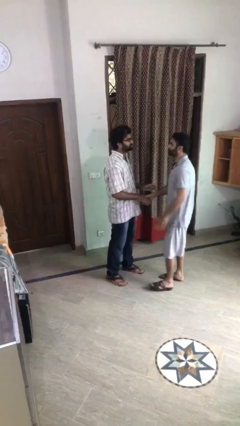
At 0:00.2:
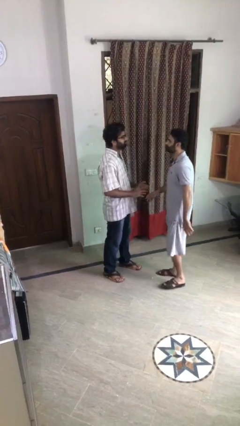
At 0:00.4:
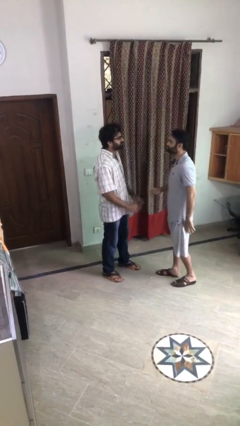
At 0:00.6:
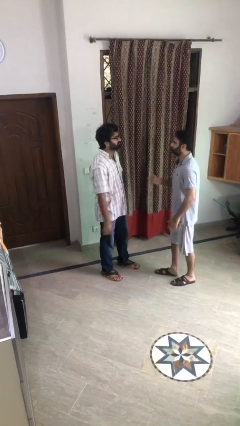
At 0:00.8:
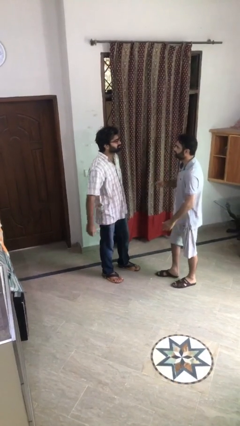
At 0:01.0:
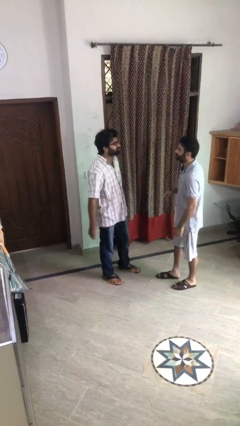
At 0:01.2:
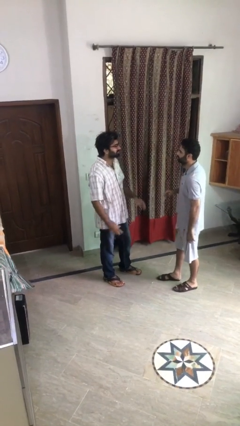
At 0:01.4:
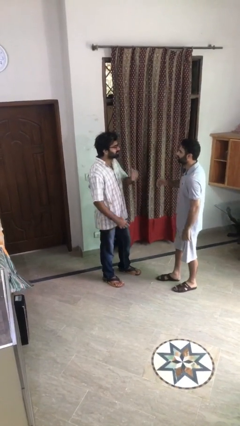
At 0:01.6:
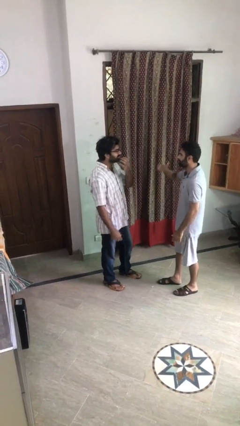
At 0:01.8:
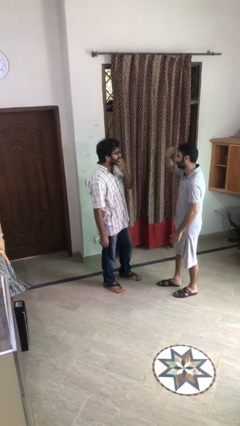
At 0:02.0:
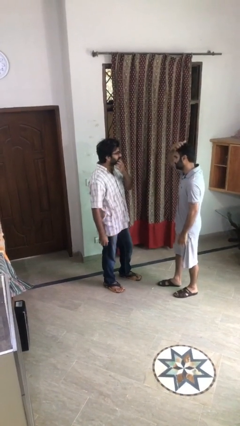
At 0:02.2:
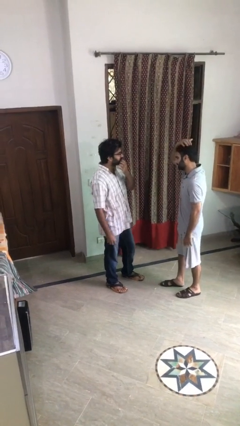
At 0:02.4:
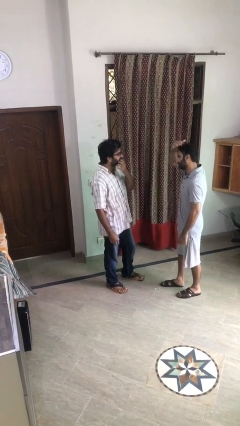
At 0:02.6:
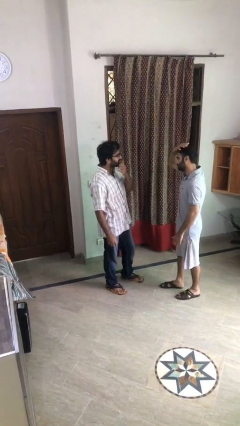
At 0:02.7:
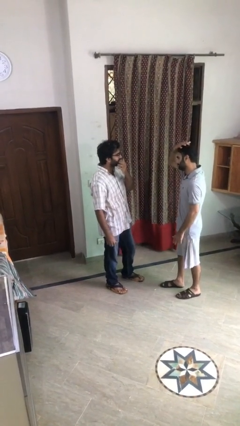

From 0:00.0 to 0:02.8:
person talks to person

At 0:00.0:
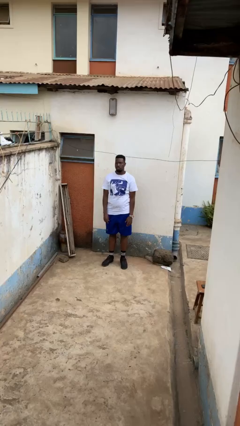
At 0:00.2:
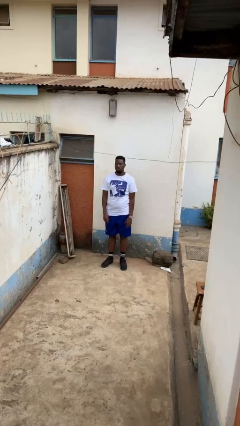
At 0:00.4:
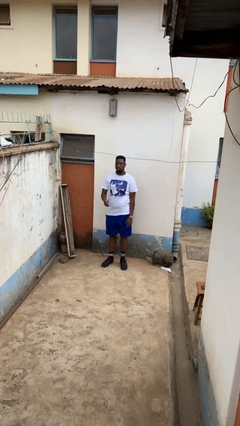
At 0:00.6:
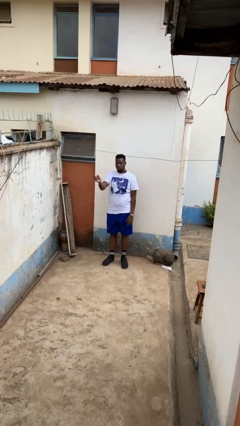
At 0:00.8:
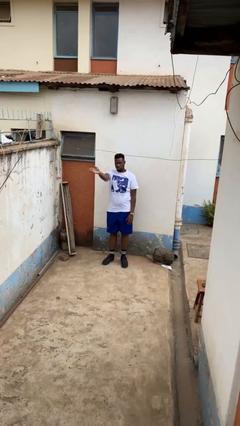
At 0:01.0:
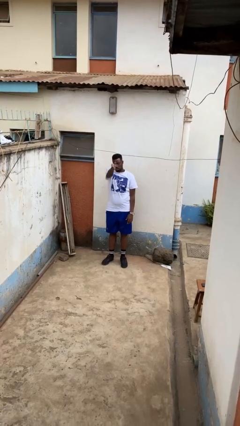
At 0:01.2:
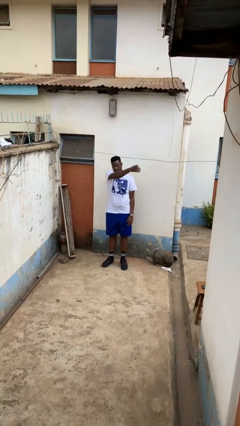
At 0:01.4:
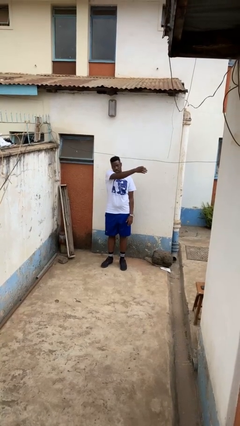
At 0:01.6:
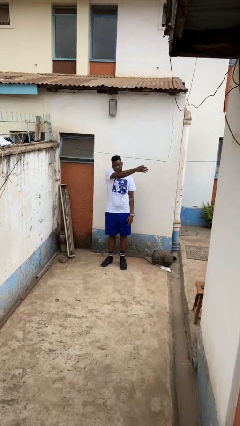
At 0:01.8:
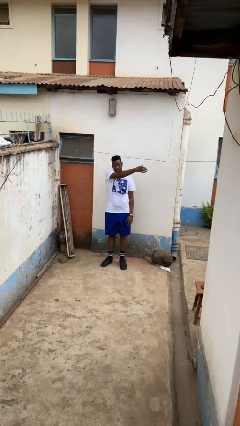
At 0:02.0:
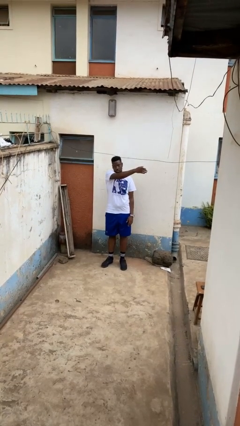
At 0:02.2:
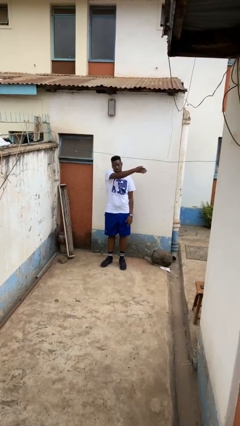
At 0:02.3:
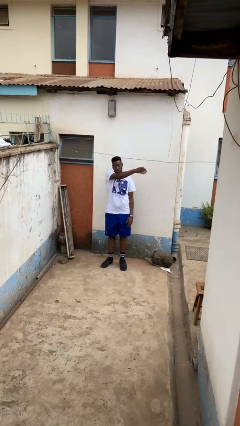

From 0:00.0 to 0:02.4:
person gestures swipe left

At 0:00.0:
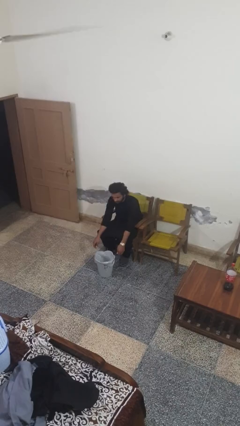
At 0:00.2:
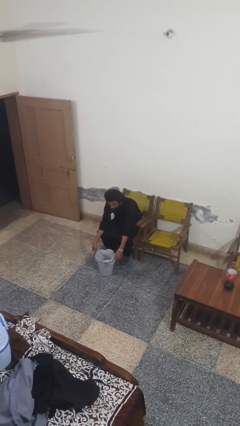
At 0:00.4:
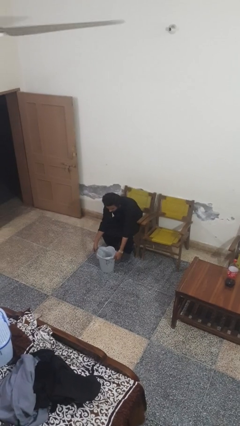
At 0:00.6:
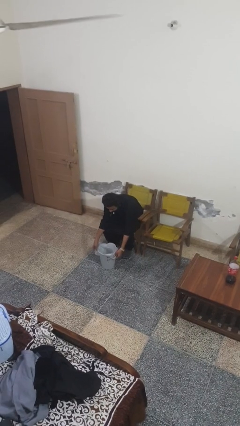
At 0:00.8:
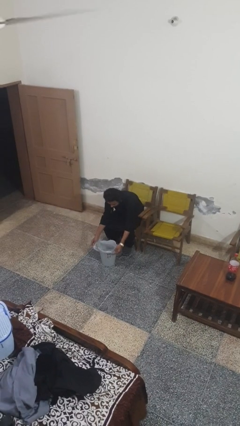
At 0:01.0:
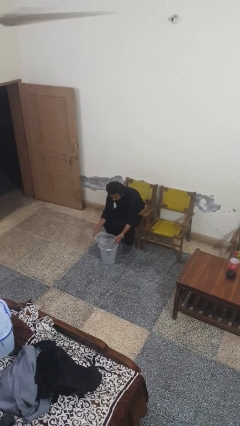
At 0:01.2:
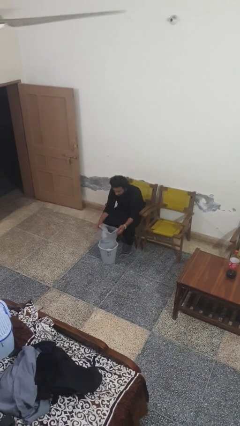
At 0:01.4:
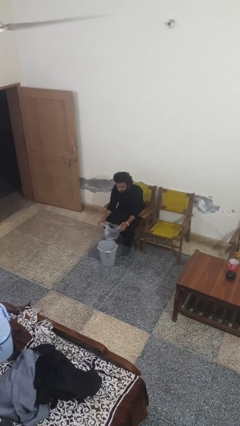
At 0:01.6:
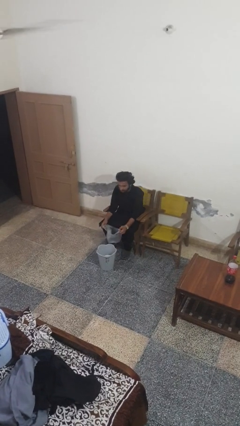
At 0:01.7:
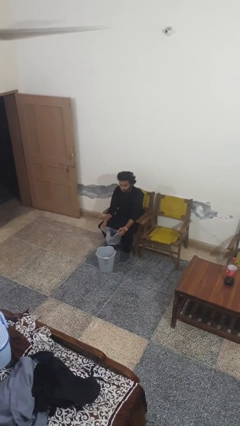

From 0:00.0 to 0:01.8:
person removes trashbag from trashcan

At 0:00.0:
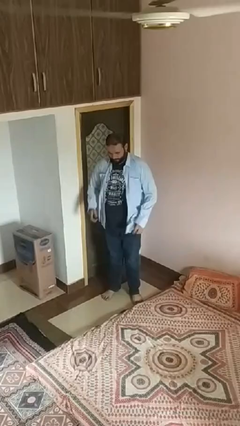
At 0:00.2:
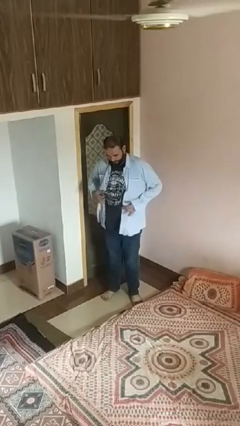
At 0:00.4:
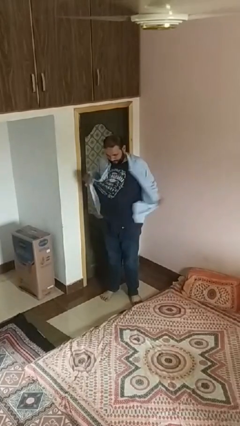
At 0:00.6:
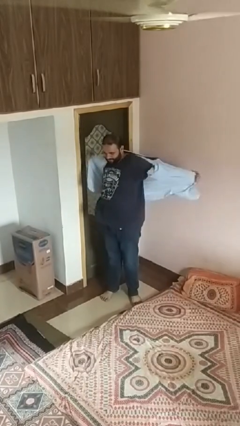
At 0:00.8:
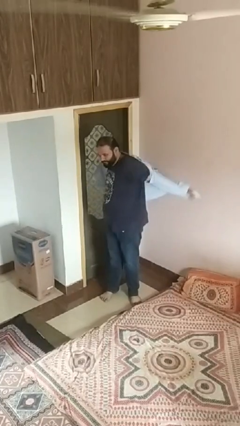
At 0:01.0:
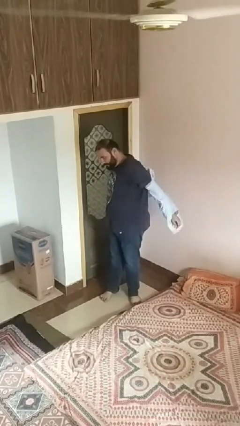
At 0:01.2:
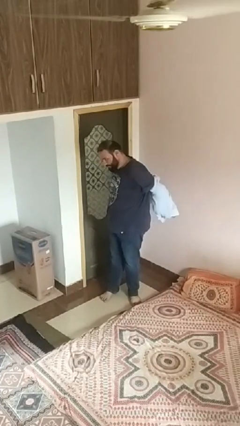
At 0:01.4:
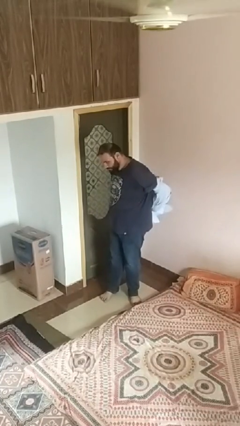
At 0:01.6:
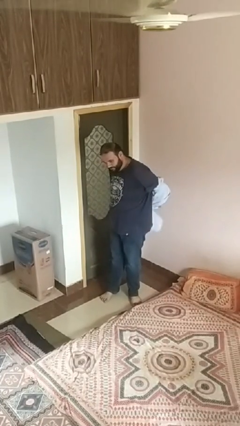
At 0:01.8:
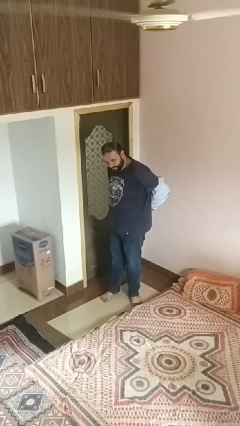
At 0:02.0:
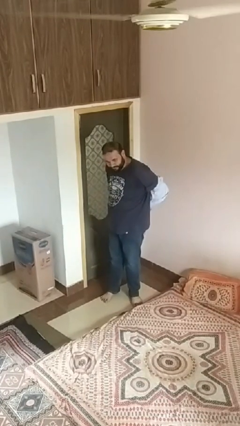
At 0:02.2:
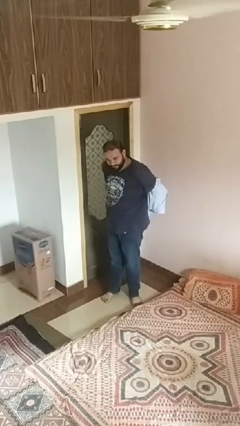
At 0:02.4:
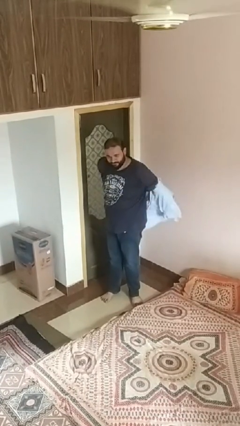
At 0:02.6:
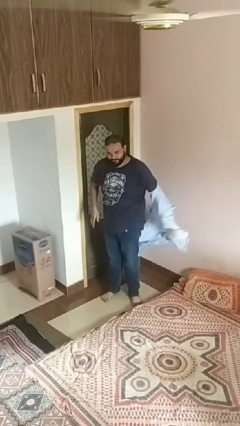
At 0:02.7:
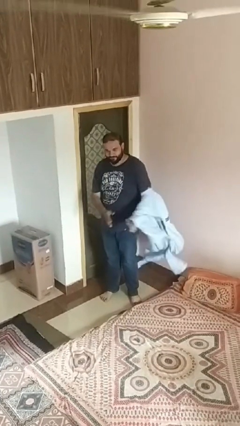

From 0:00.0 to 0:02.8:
person takes off shirt

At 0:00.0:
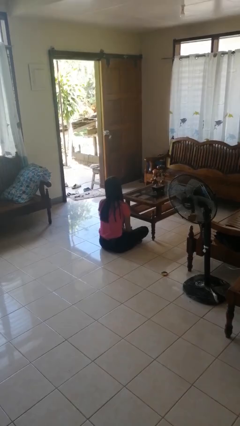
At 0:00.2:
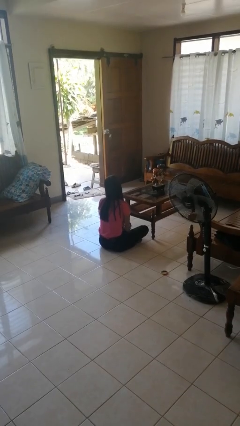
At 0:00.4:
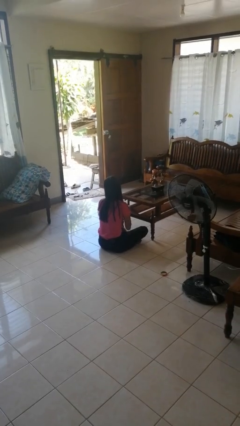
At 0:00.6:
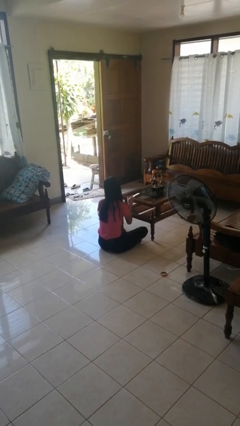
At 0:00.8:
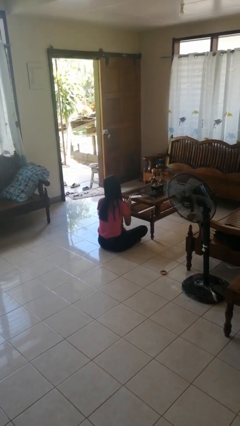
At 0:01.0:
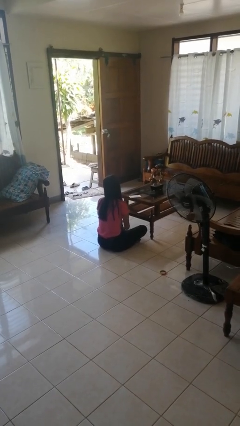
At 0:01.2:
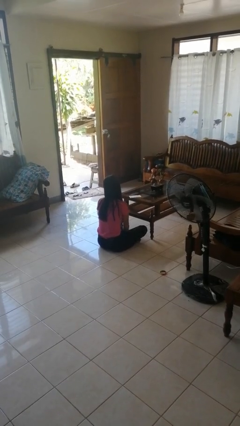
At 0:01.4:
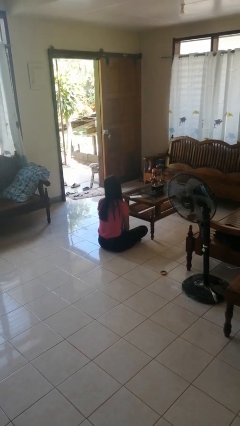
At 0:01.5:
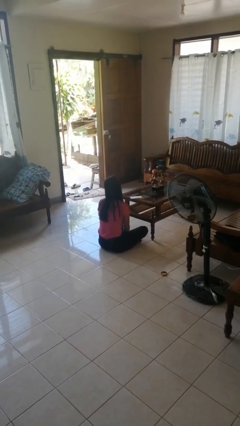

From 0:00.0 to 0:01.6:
person throws object on table

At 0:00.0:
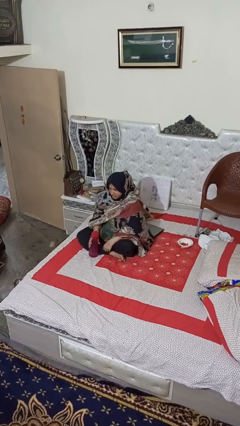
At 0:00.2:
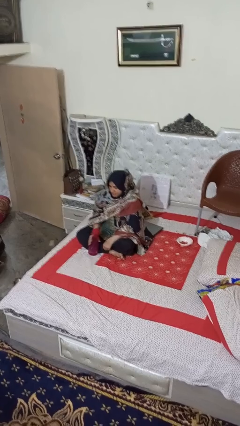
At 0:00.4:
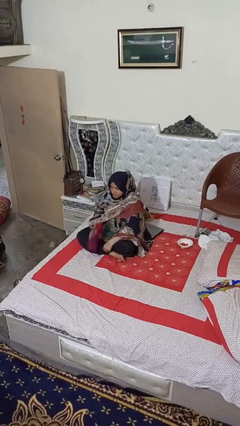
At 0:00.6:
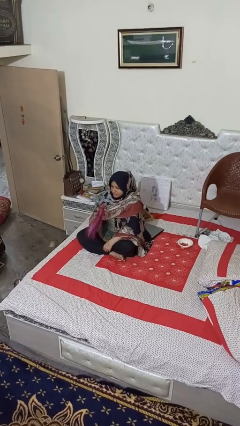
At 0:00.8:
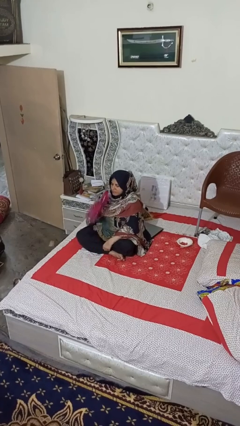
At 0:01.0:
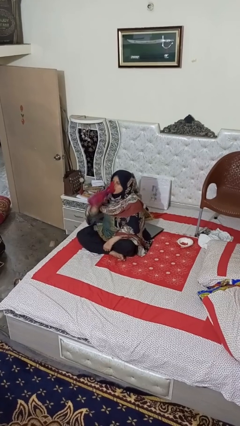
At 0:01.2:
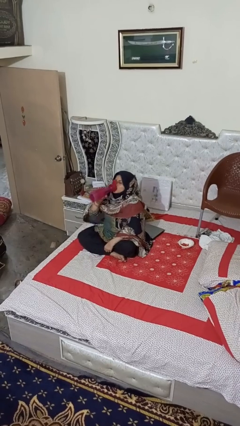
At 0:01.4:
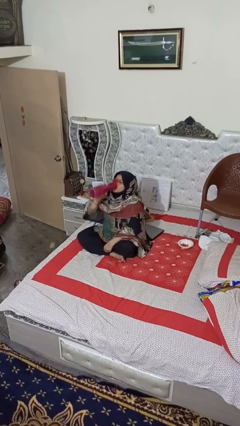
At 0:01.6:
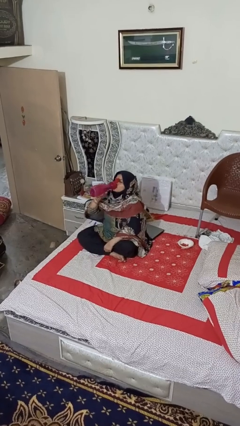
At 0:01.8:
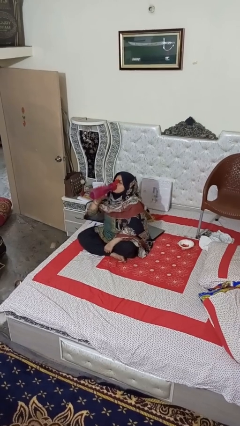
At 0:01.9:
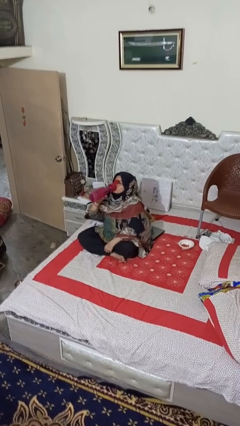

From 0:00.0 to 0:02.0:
person drinks from bottle

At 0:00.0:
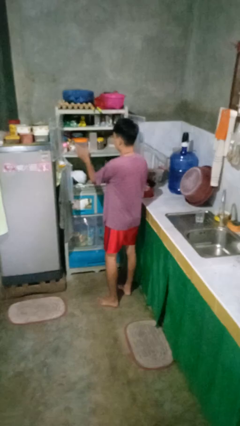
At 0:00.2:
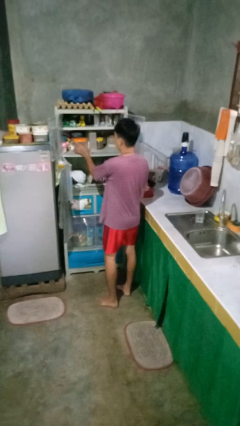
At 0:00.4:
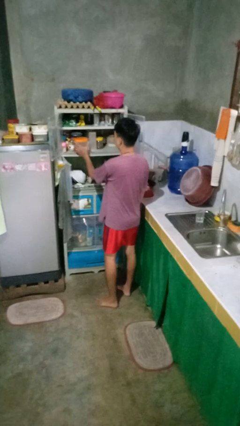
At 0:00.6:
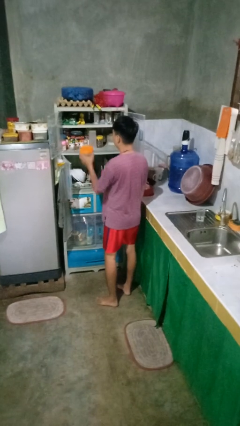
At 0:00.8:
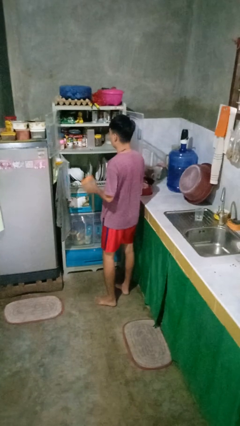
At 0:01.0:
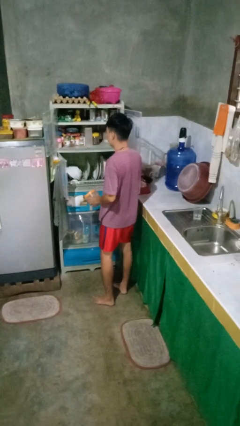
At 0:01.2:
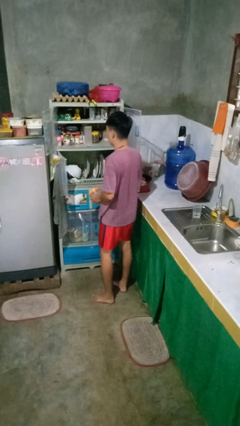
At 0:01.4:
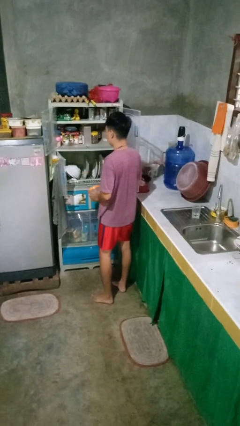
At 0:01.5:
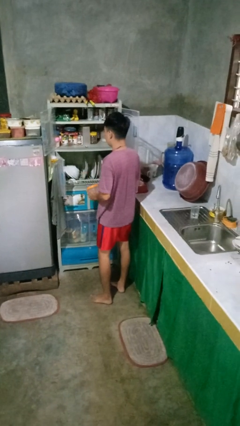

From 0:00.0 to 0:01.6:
person takes object from cabinet

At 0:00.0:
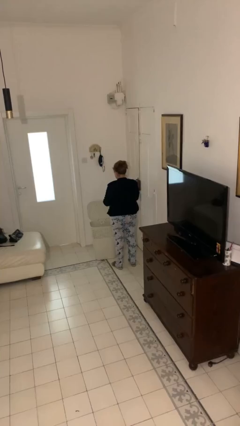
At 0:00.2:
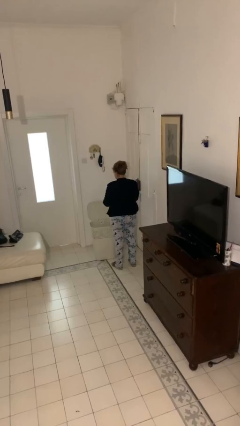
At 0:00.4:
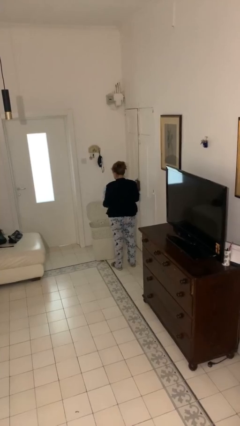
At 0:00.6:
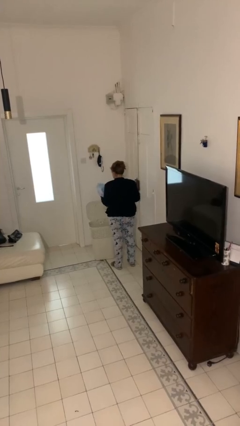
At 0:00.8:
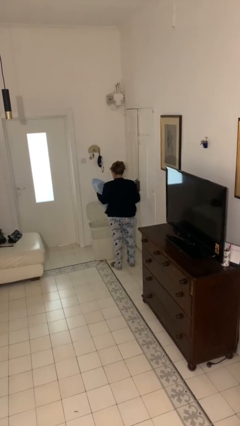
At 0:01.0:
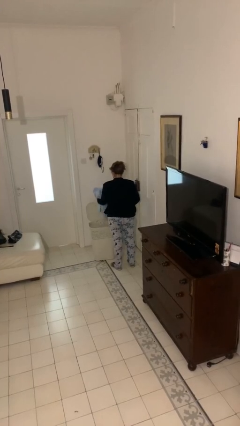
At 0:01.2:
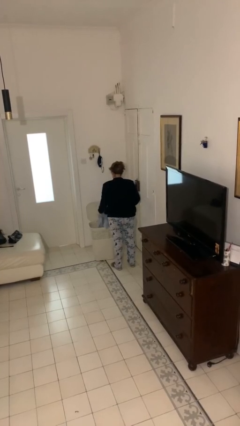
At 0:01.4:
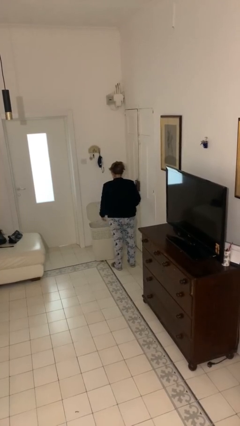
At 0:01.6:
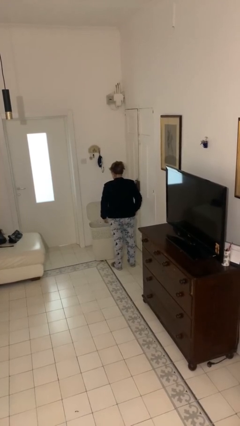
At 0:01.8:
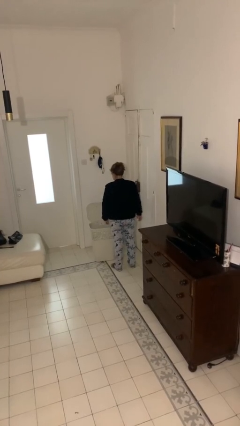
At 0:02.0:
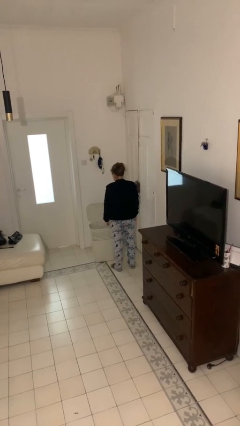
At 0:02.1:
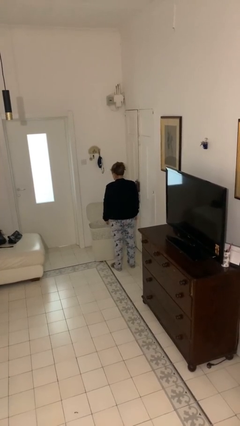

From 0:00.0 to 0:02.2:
person puts object into basket
